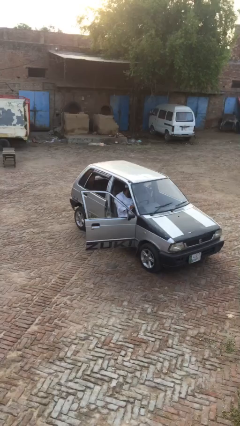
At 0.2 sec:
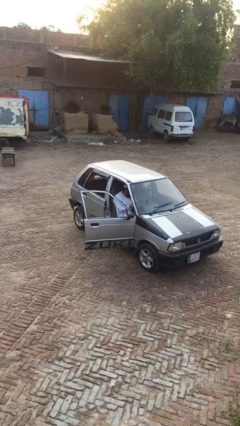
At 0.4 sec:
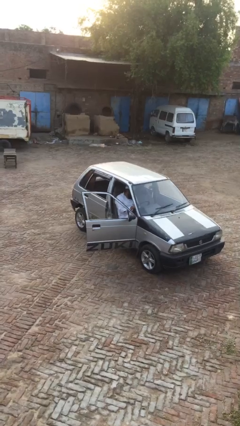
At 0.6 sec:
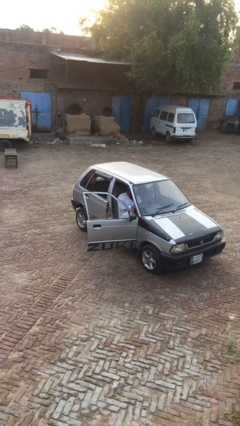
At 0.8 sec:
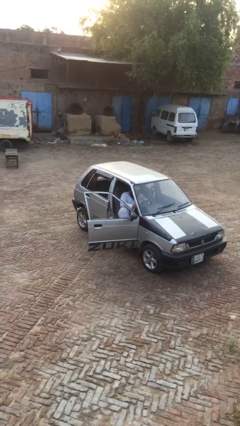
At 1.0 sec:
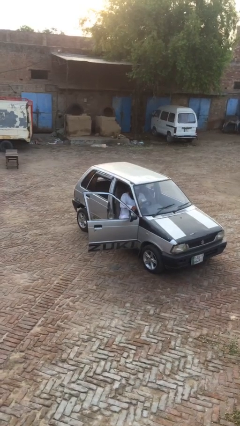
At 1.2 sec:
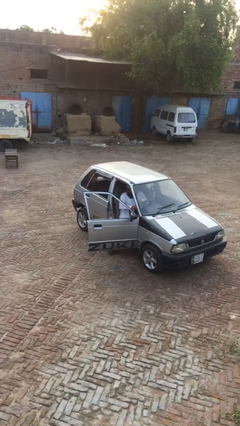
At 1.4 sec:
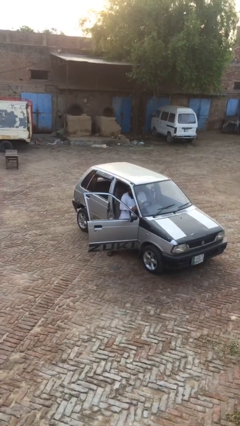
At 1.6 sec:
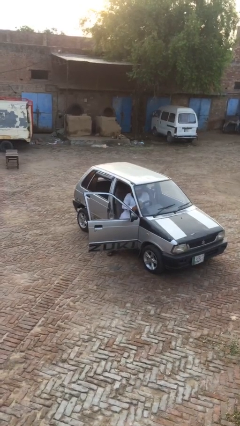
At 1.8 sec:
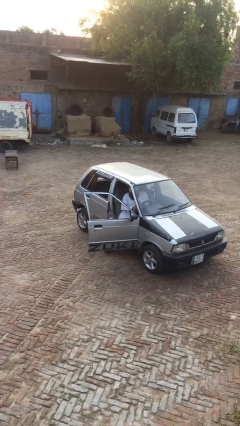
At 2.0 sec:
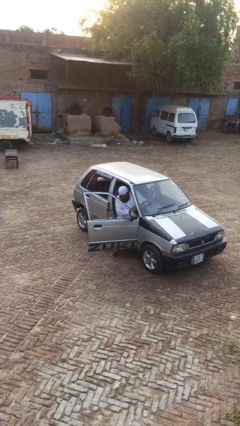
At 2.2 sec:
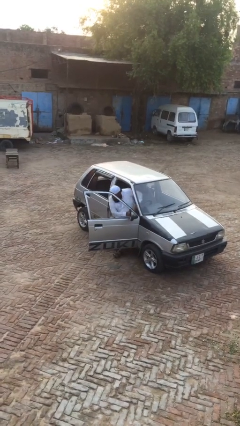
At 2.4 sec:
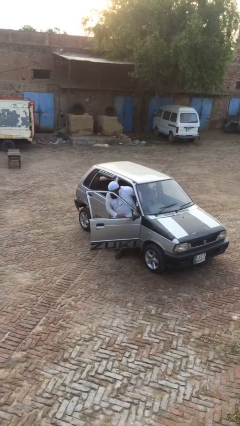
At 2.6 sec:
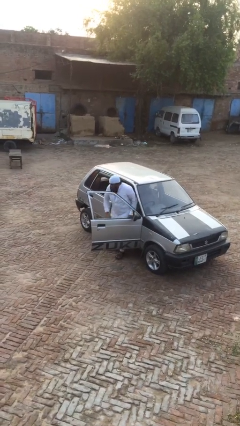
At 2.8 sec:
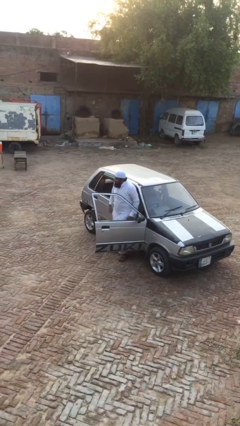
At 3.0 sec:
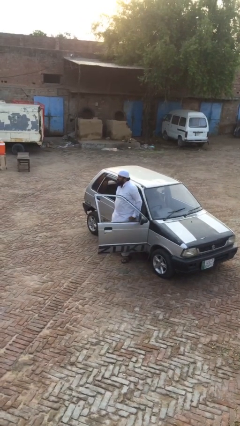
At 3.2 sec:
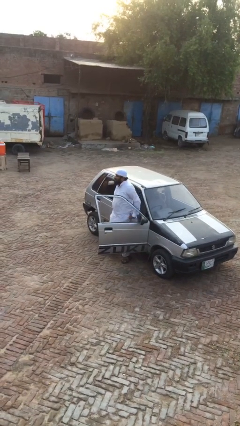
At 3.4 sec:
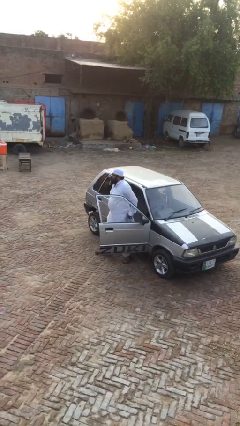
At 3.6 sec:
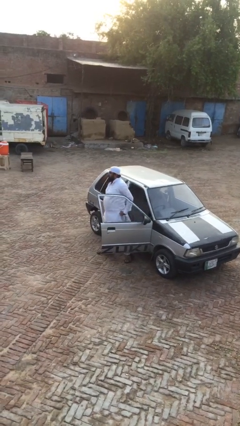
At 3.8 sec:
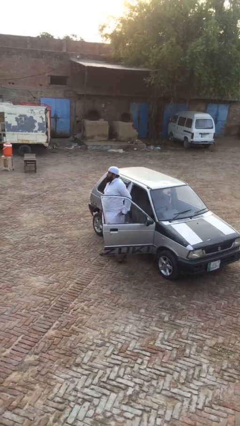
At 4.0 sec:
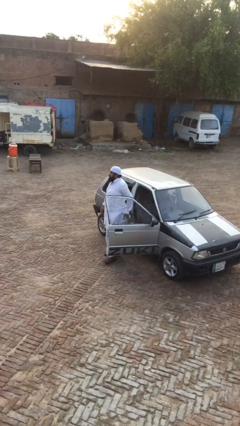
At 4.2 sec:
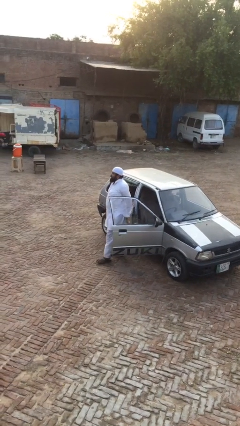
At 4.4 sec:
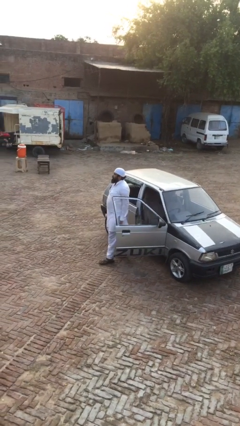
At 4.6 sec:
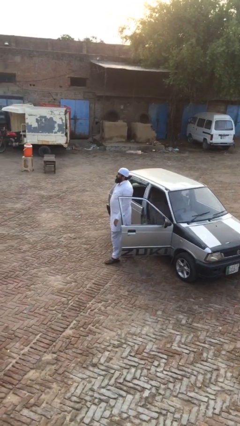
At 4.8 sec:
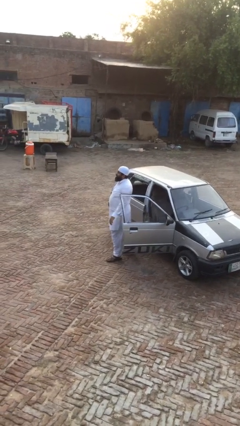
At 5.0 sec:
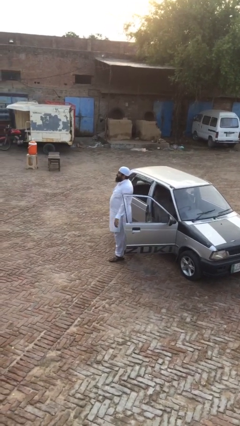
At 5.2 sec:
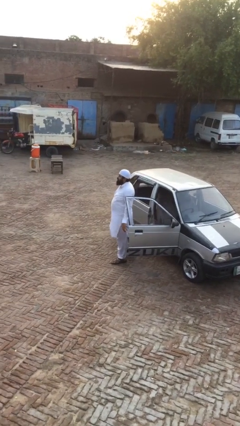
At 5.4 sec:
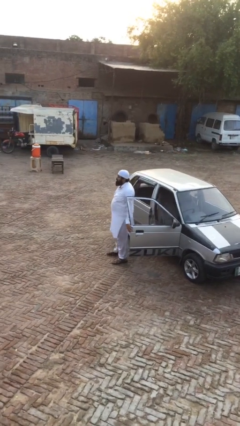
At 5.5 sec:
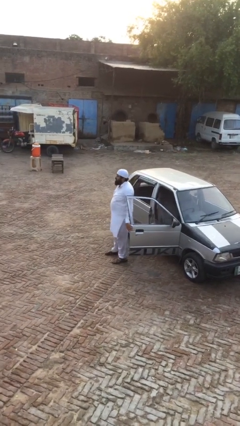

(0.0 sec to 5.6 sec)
person exits car

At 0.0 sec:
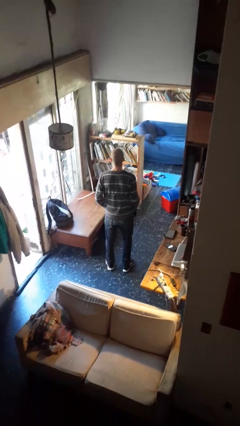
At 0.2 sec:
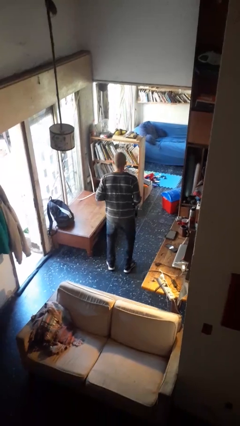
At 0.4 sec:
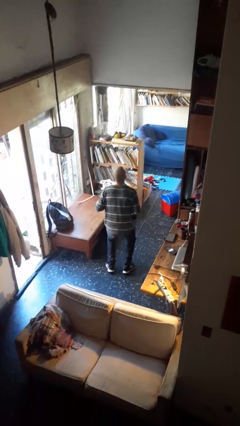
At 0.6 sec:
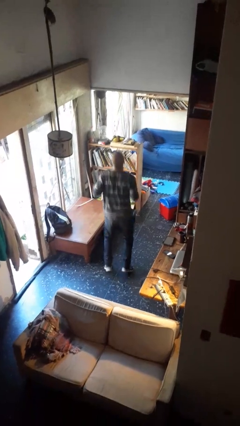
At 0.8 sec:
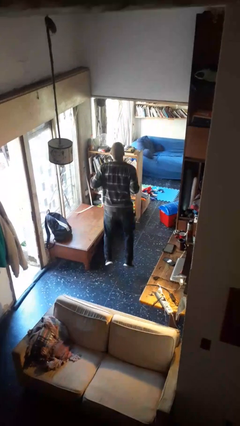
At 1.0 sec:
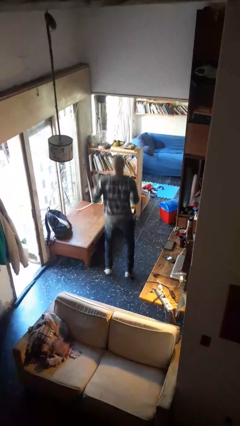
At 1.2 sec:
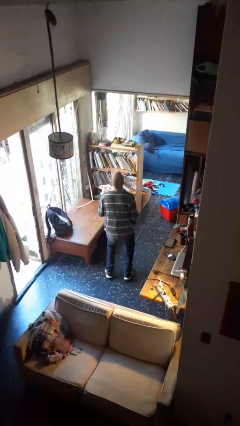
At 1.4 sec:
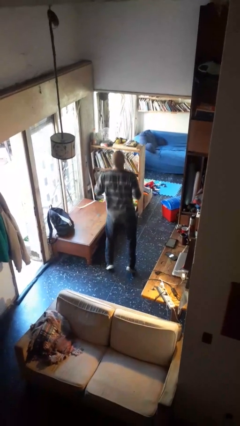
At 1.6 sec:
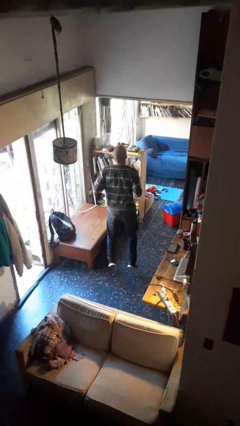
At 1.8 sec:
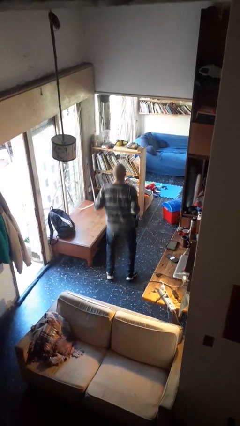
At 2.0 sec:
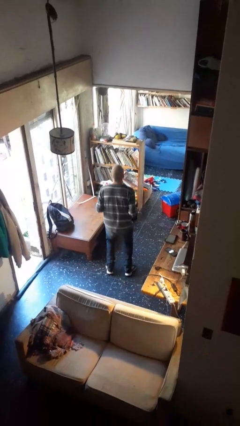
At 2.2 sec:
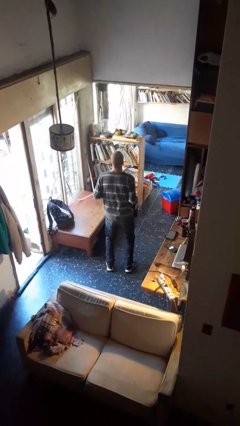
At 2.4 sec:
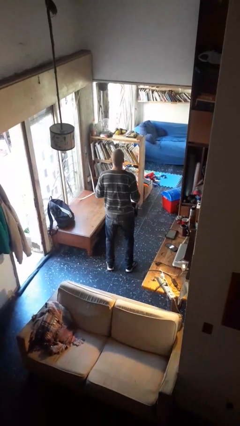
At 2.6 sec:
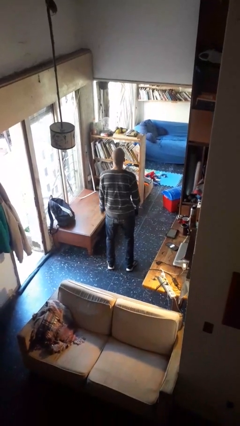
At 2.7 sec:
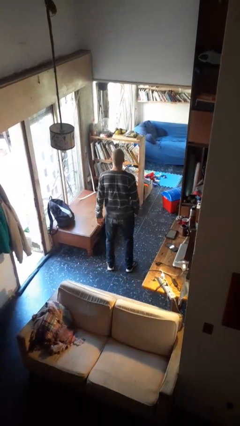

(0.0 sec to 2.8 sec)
person jumps

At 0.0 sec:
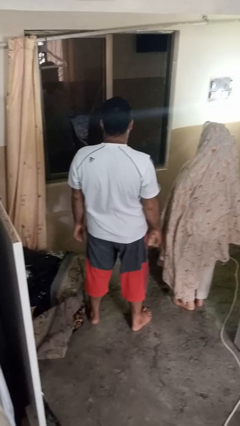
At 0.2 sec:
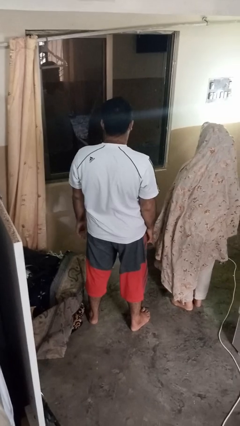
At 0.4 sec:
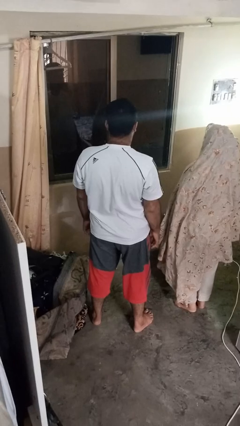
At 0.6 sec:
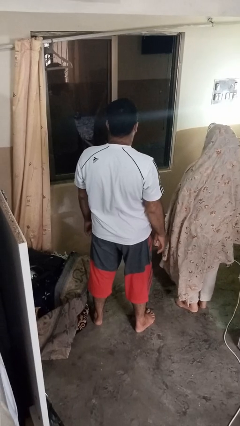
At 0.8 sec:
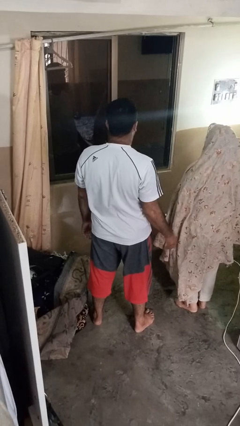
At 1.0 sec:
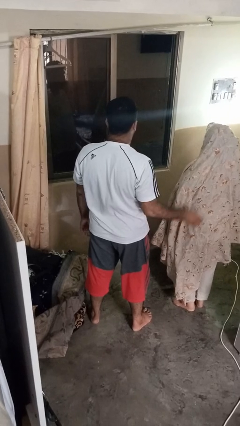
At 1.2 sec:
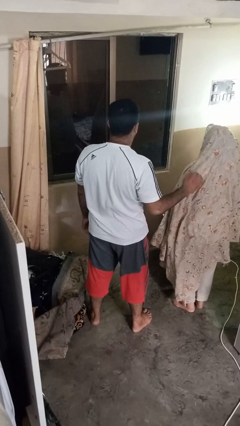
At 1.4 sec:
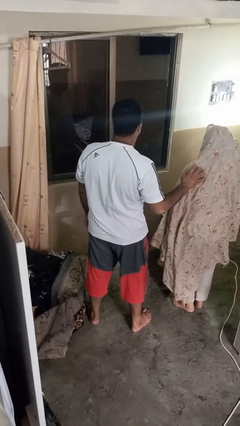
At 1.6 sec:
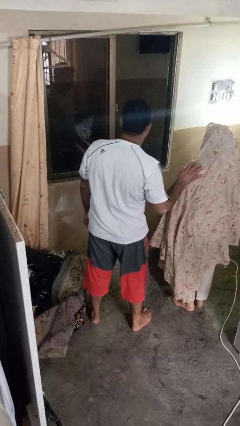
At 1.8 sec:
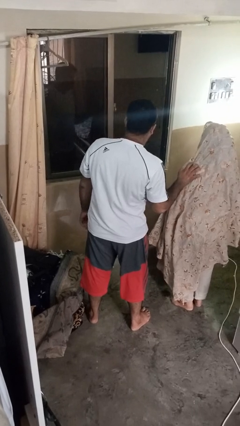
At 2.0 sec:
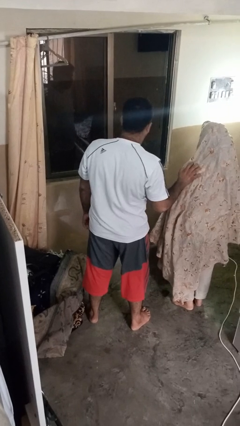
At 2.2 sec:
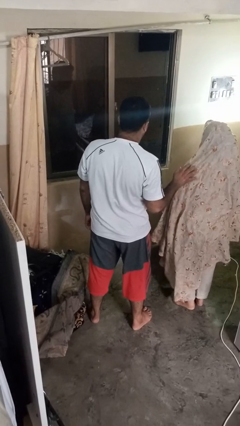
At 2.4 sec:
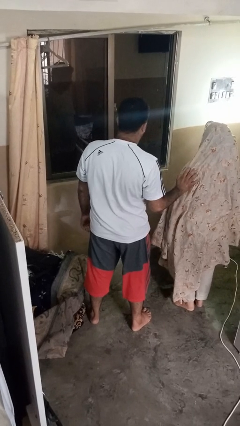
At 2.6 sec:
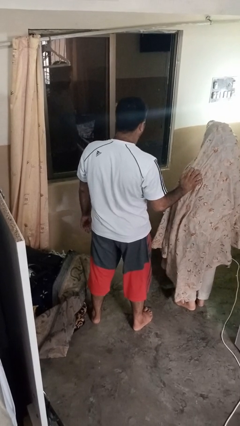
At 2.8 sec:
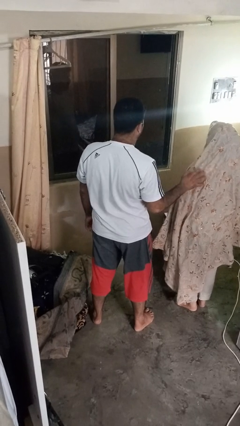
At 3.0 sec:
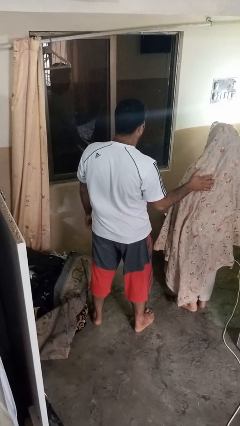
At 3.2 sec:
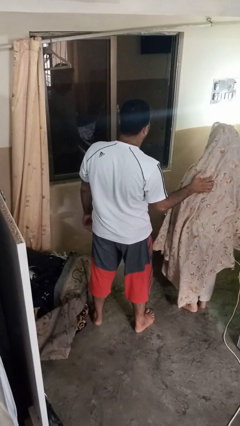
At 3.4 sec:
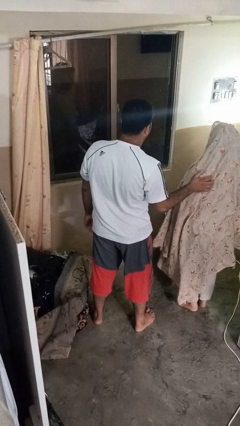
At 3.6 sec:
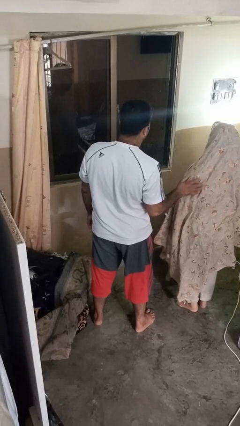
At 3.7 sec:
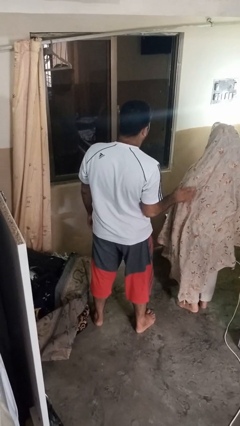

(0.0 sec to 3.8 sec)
person grabs person by bicep

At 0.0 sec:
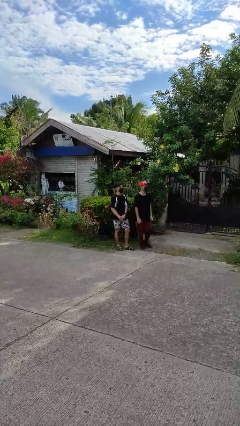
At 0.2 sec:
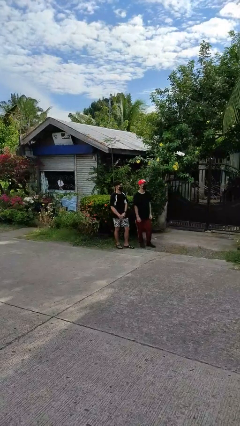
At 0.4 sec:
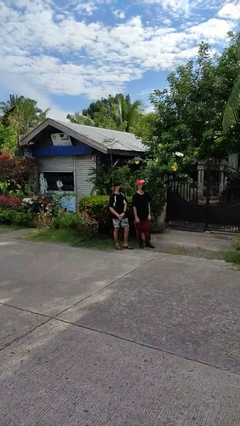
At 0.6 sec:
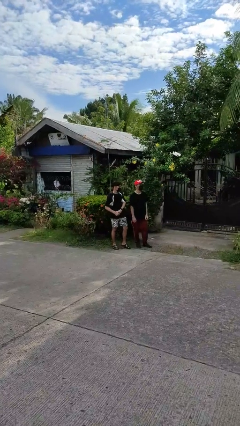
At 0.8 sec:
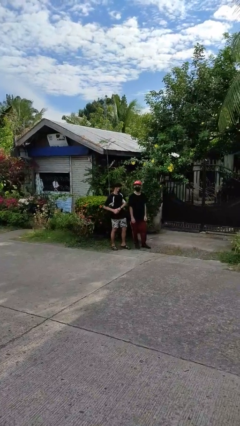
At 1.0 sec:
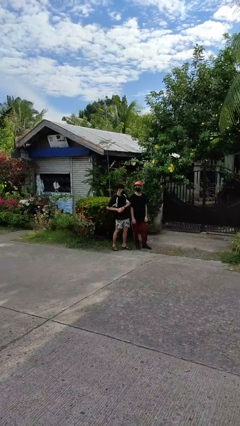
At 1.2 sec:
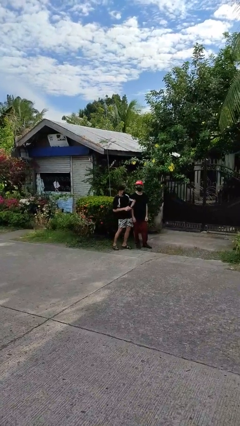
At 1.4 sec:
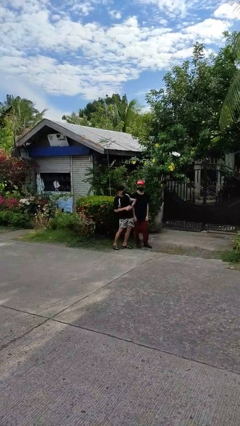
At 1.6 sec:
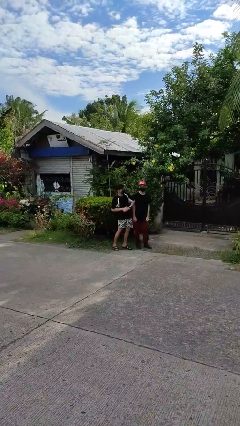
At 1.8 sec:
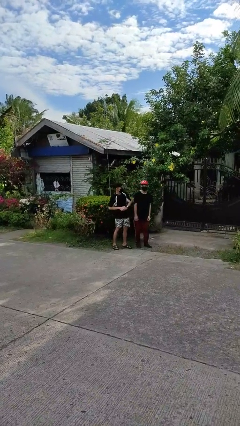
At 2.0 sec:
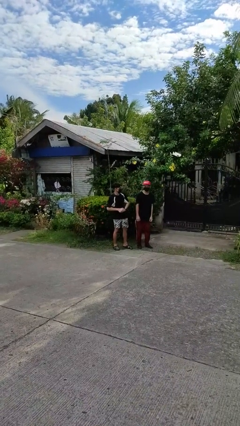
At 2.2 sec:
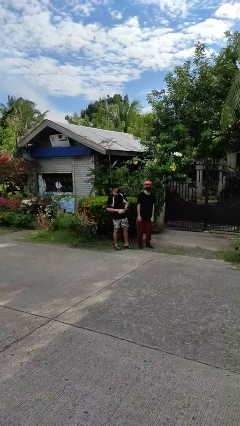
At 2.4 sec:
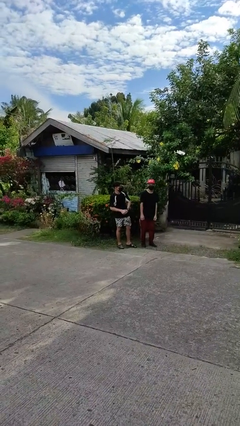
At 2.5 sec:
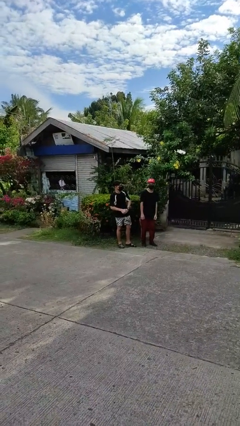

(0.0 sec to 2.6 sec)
person nudges person with elbow

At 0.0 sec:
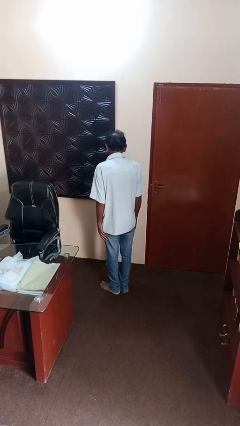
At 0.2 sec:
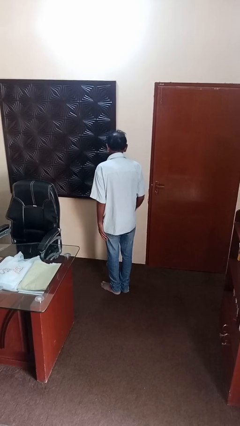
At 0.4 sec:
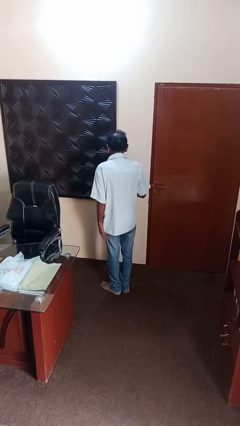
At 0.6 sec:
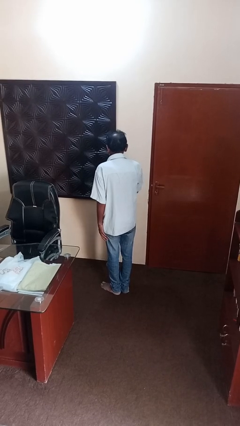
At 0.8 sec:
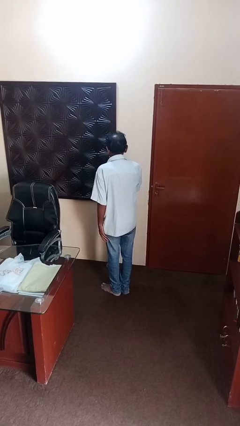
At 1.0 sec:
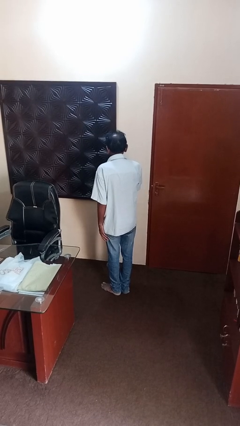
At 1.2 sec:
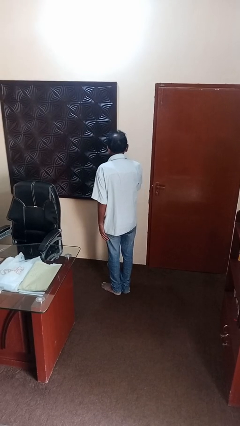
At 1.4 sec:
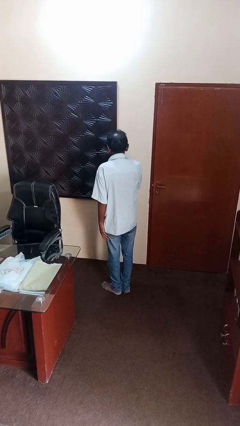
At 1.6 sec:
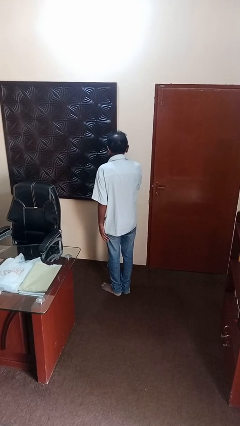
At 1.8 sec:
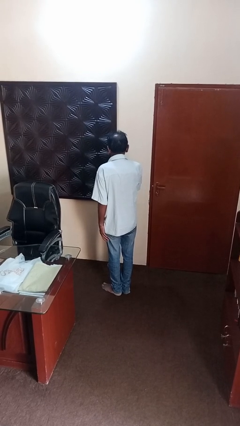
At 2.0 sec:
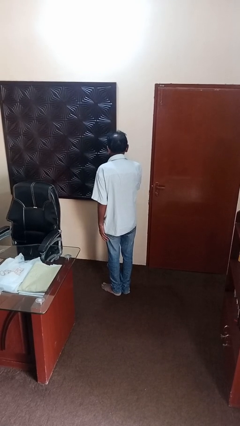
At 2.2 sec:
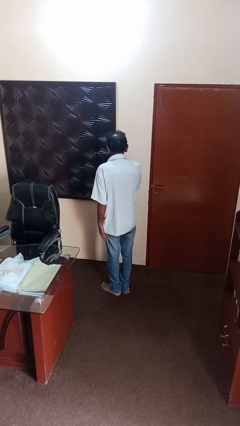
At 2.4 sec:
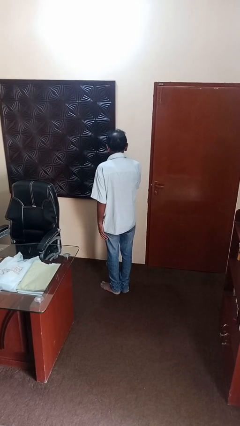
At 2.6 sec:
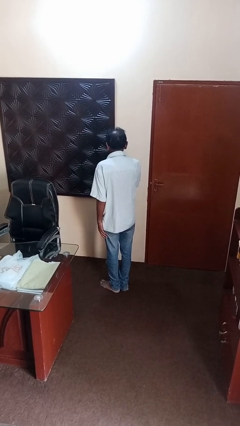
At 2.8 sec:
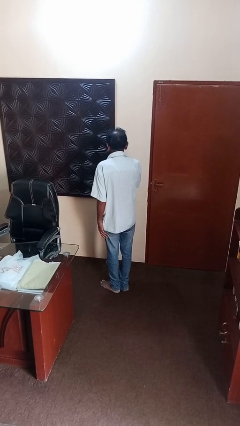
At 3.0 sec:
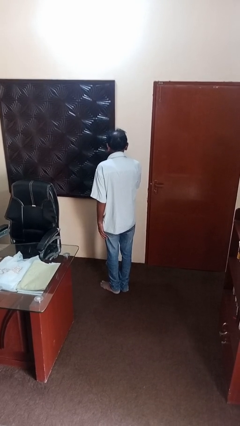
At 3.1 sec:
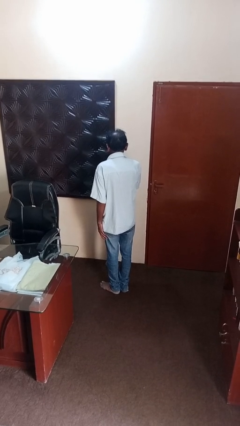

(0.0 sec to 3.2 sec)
person licks fingers
